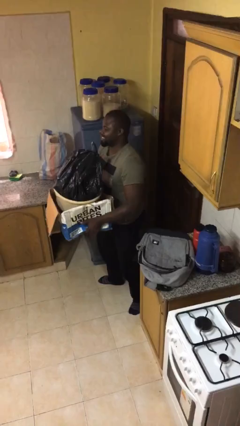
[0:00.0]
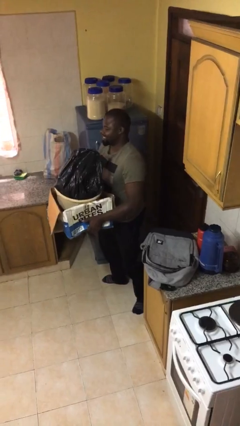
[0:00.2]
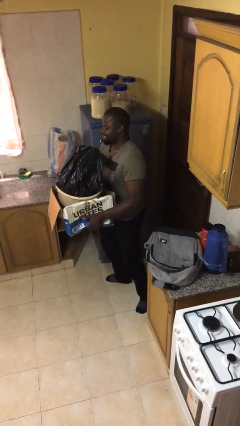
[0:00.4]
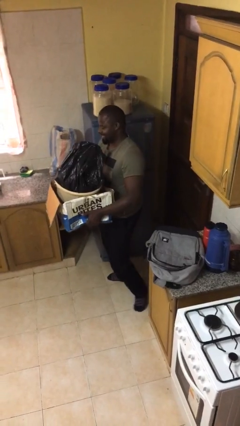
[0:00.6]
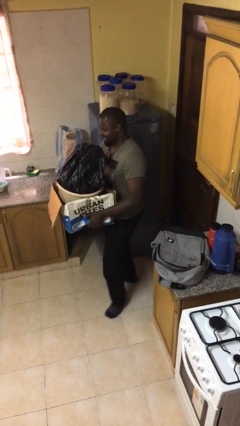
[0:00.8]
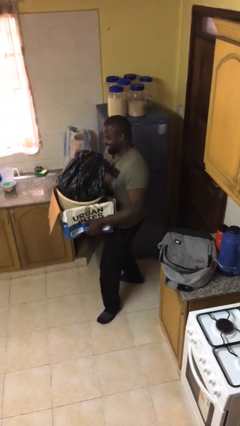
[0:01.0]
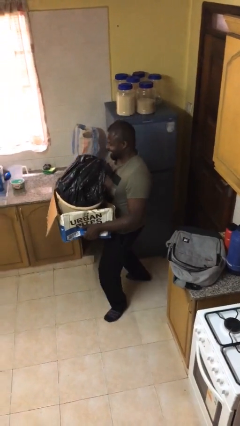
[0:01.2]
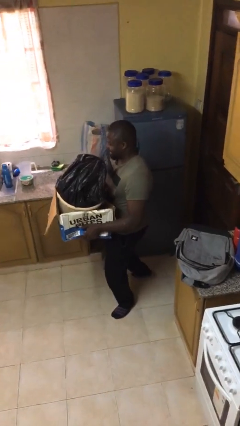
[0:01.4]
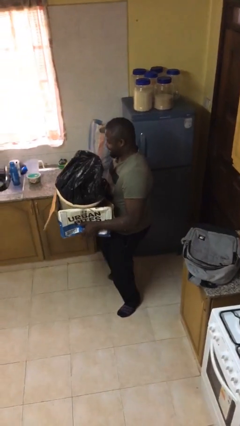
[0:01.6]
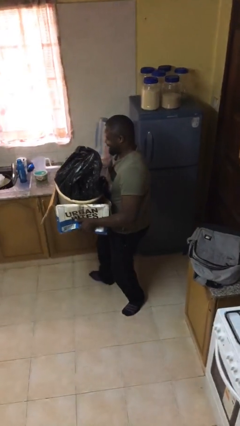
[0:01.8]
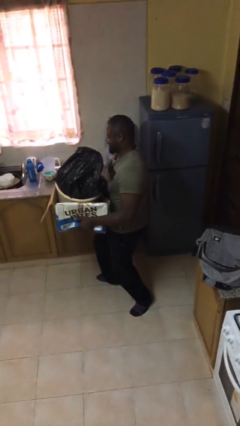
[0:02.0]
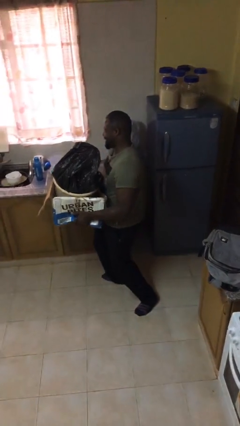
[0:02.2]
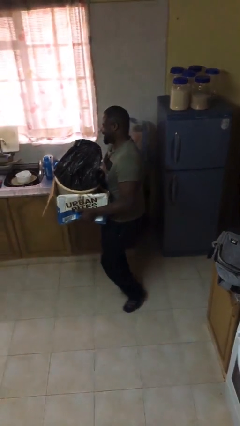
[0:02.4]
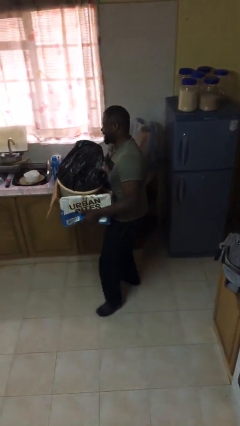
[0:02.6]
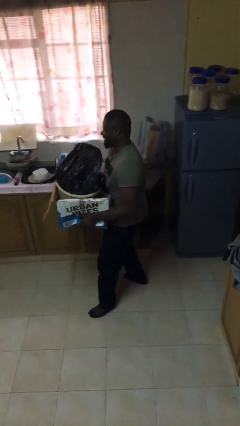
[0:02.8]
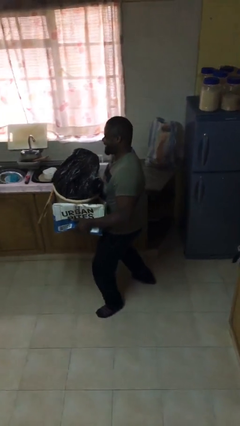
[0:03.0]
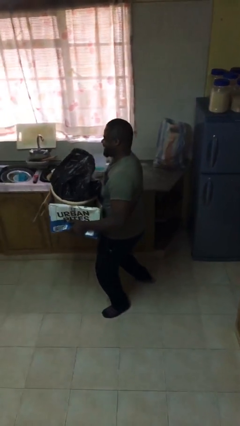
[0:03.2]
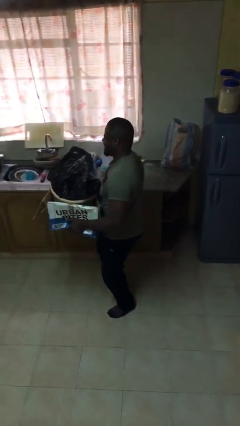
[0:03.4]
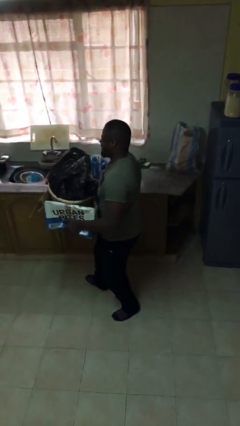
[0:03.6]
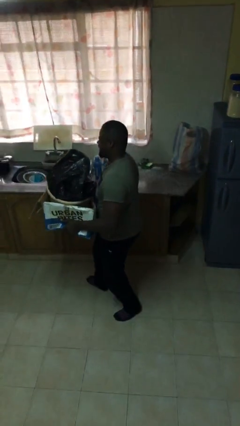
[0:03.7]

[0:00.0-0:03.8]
person carries heavy object

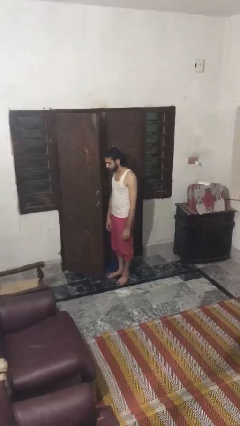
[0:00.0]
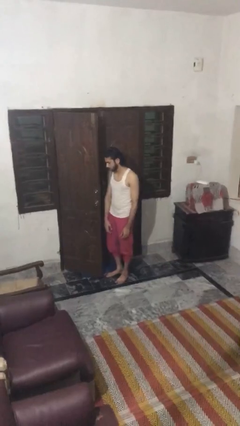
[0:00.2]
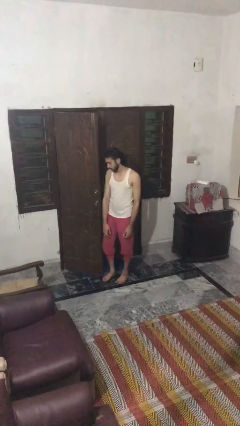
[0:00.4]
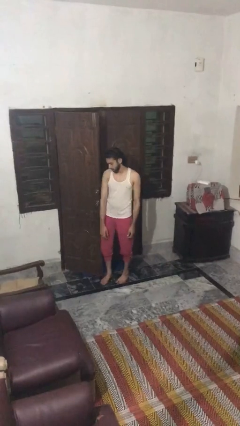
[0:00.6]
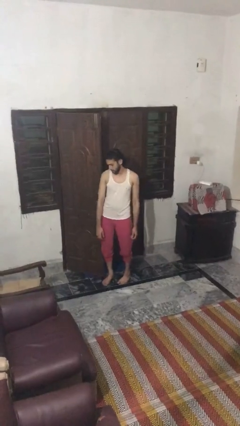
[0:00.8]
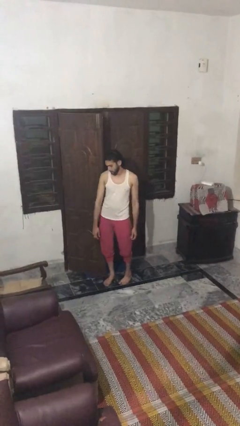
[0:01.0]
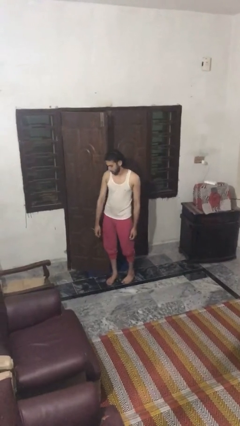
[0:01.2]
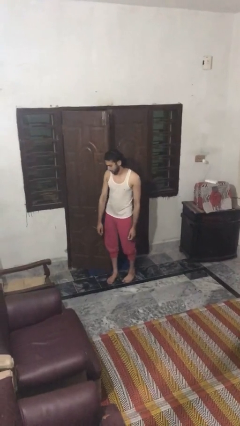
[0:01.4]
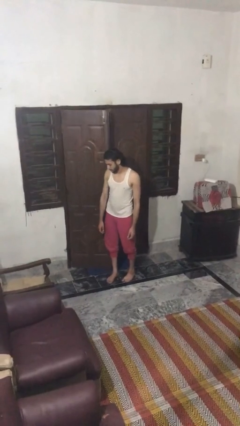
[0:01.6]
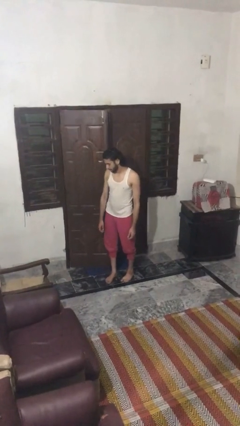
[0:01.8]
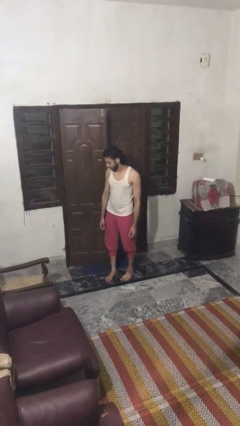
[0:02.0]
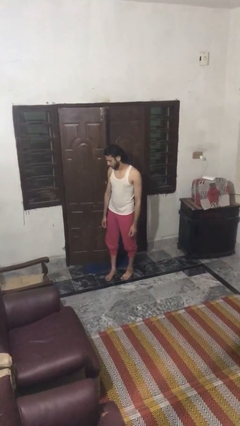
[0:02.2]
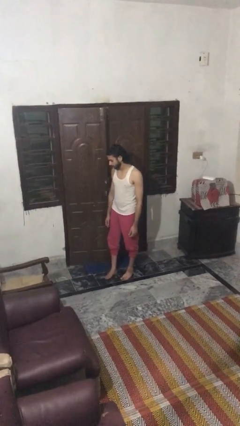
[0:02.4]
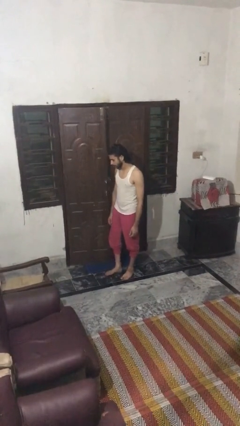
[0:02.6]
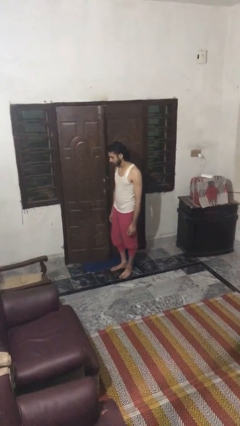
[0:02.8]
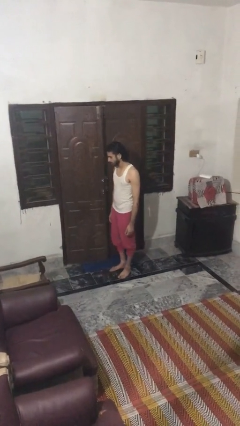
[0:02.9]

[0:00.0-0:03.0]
person closes door with hip

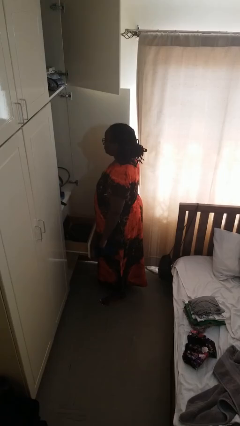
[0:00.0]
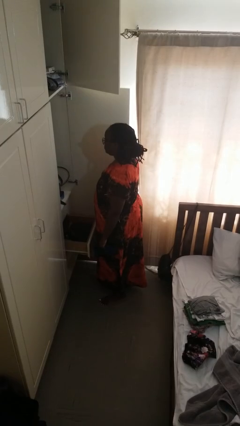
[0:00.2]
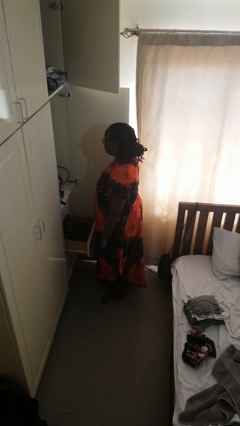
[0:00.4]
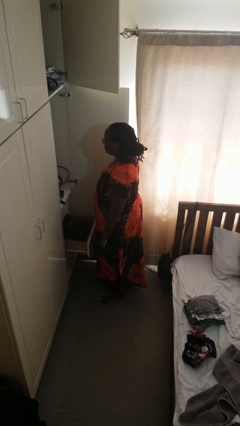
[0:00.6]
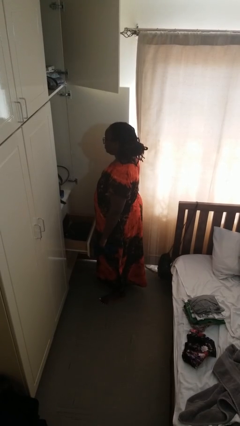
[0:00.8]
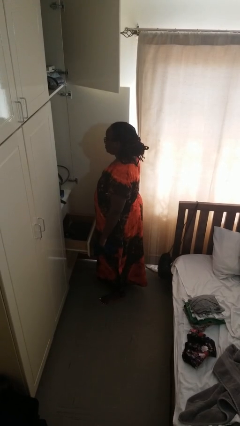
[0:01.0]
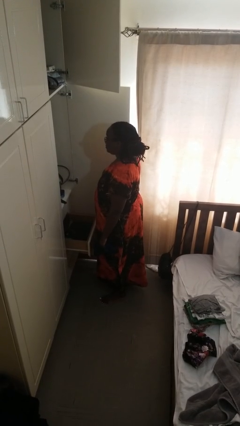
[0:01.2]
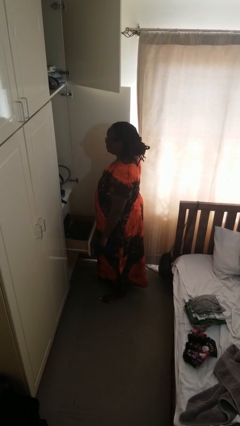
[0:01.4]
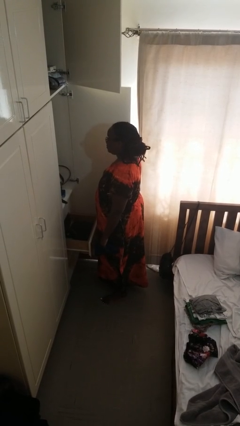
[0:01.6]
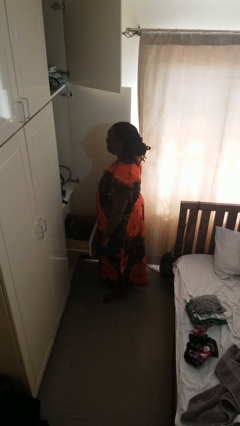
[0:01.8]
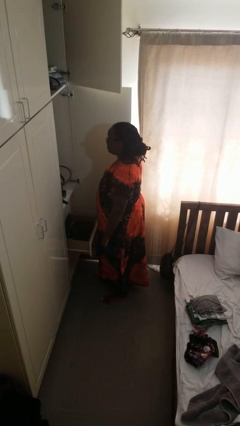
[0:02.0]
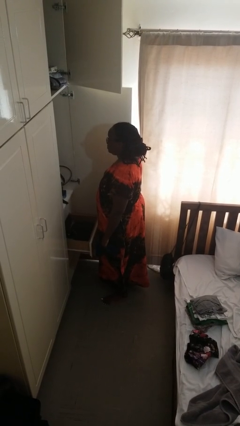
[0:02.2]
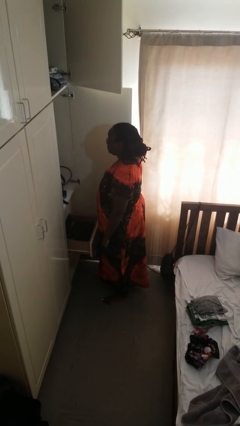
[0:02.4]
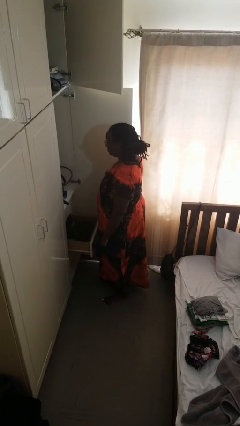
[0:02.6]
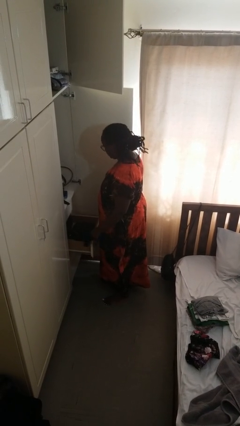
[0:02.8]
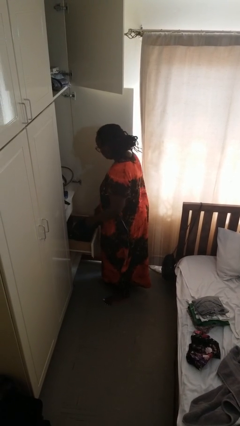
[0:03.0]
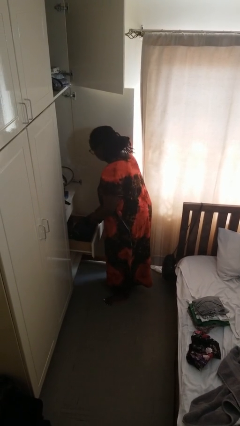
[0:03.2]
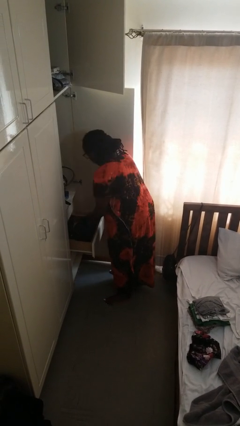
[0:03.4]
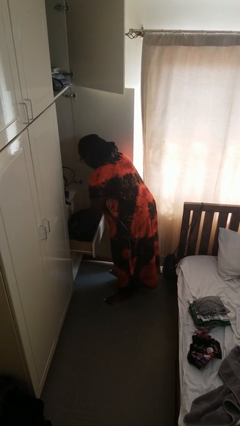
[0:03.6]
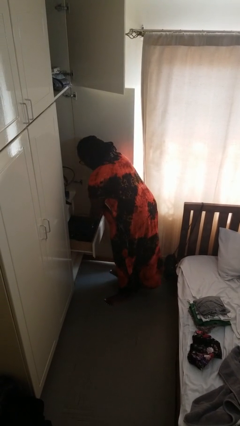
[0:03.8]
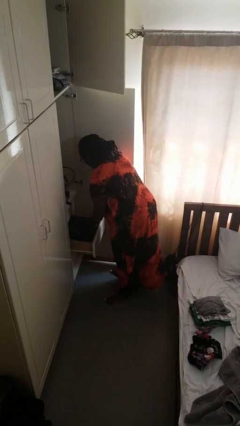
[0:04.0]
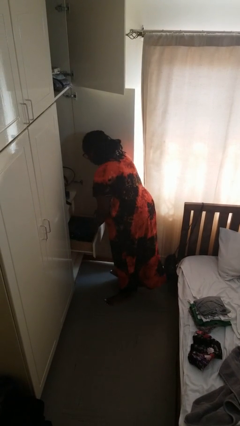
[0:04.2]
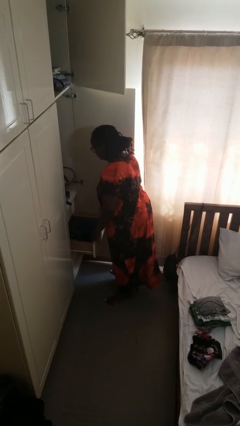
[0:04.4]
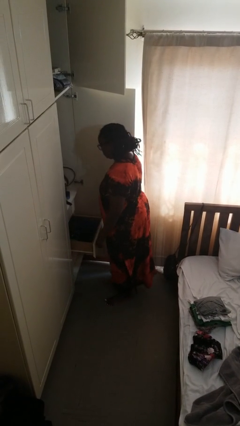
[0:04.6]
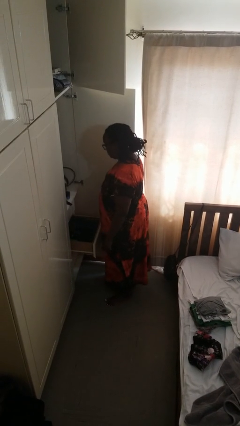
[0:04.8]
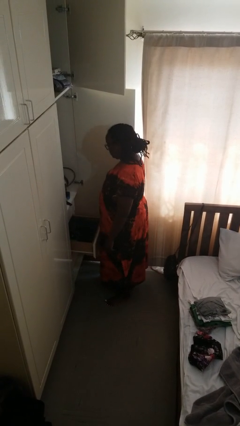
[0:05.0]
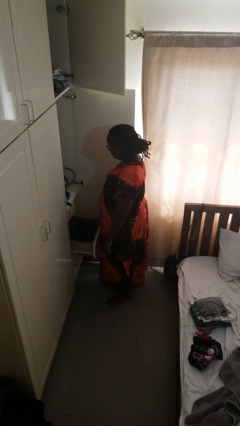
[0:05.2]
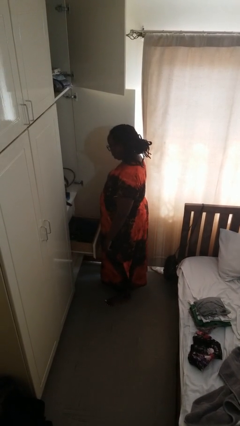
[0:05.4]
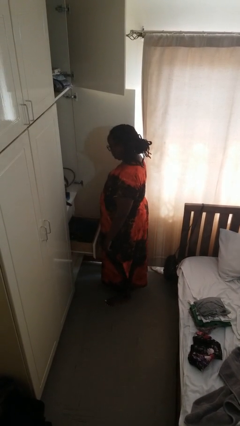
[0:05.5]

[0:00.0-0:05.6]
person puts clothes into dresser

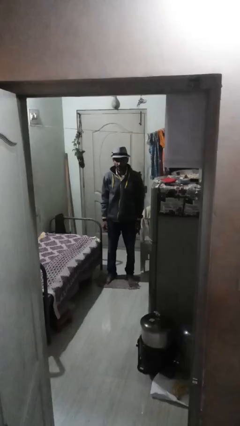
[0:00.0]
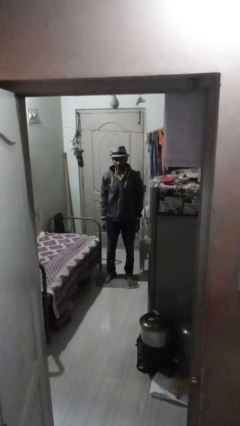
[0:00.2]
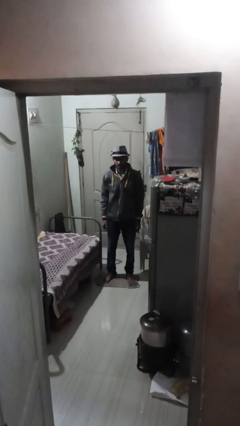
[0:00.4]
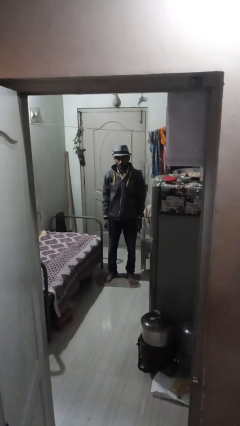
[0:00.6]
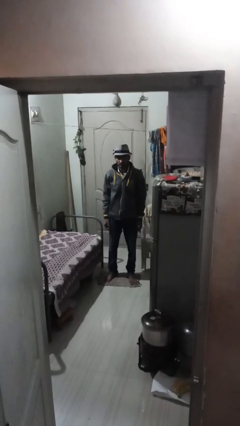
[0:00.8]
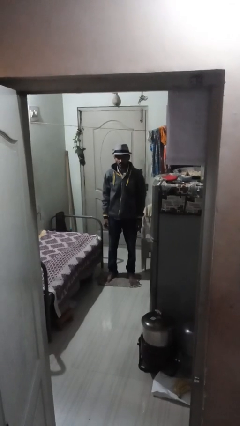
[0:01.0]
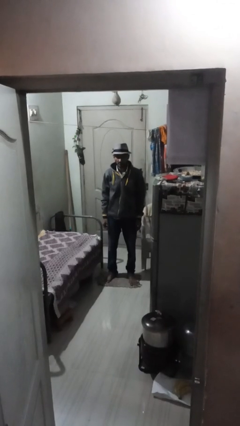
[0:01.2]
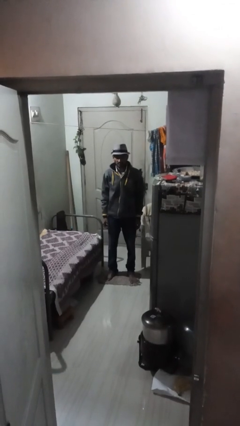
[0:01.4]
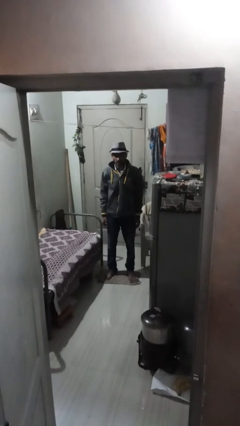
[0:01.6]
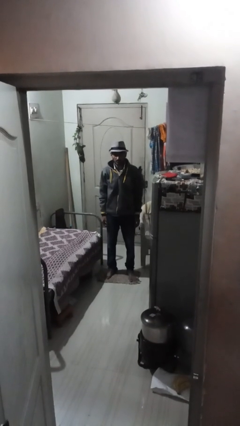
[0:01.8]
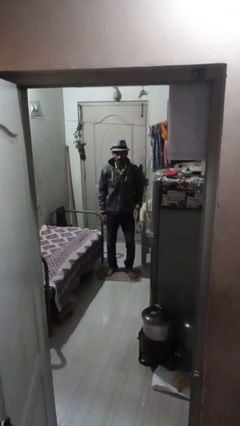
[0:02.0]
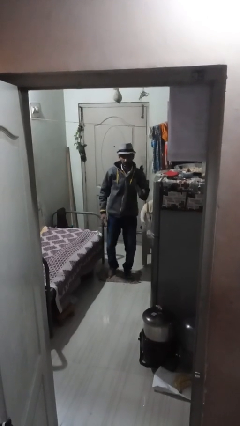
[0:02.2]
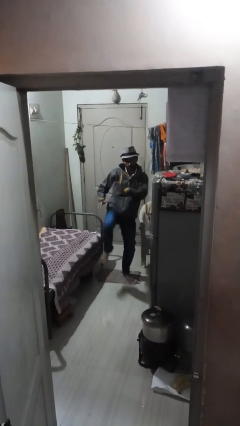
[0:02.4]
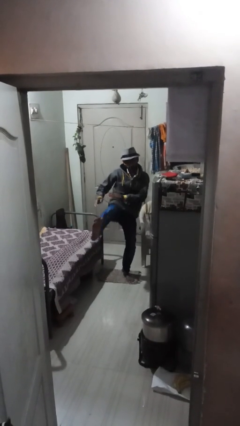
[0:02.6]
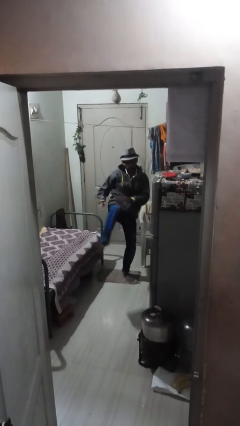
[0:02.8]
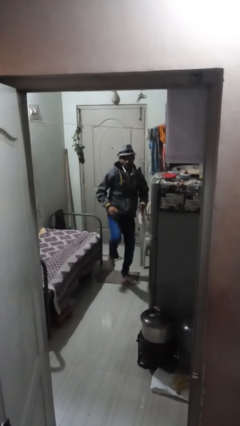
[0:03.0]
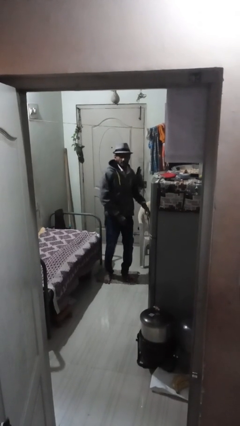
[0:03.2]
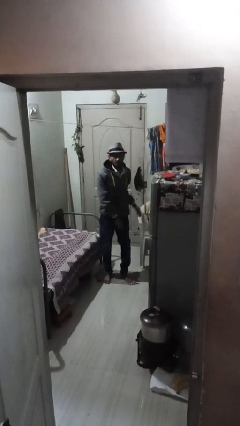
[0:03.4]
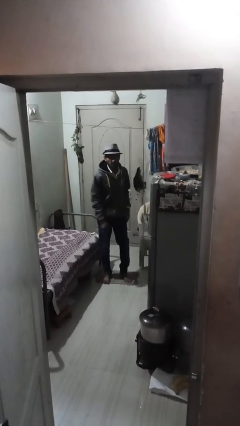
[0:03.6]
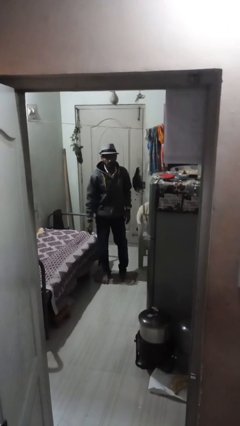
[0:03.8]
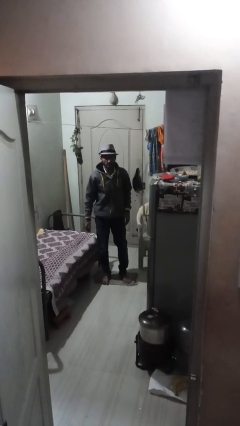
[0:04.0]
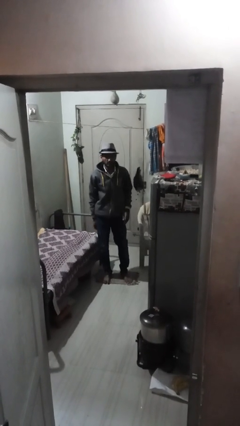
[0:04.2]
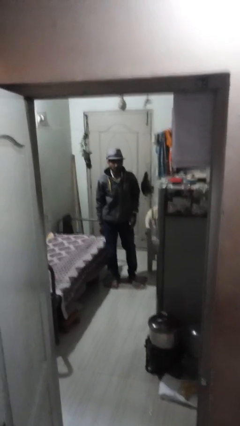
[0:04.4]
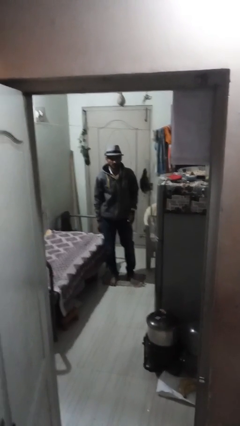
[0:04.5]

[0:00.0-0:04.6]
person karate kicks

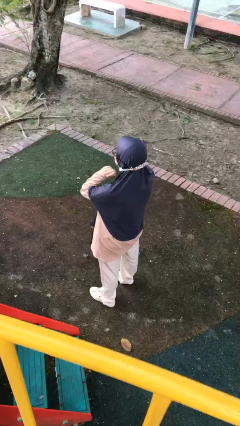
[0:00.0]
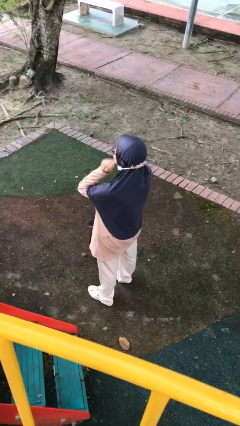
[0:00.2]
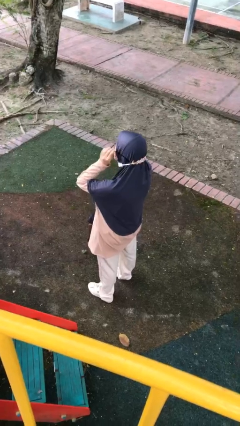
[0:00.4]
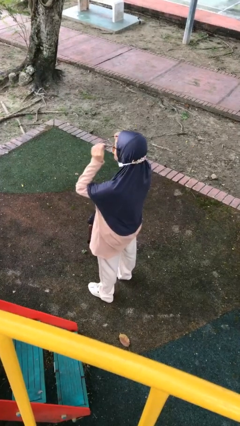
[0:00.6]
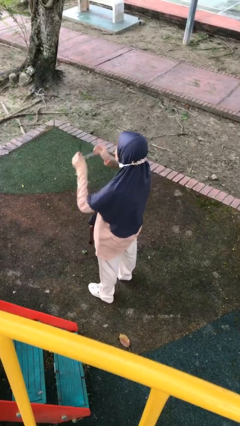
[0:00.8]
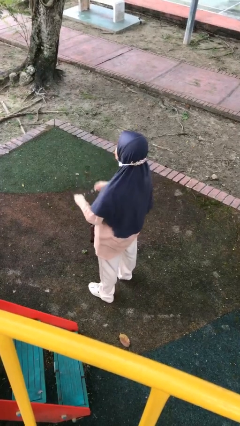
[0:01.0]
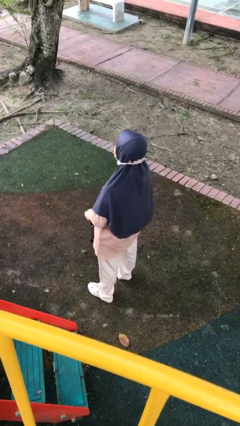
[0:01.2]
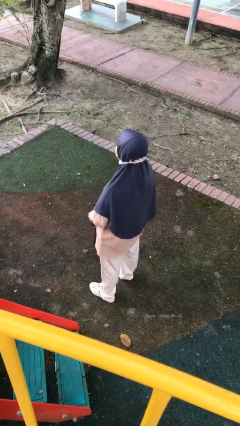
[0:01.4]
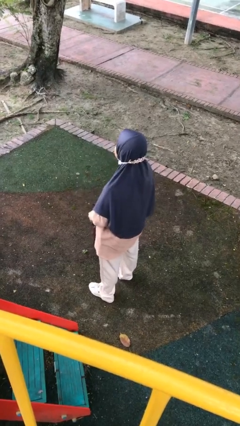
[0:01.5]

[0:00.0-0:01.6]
person takes off glasses
